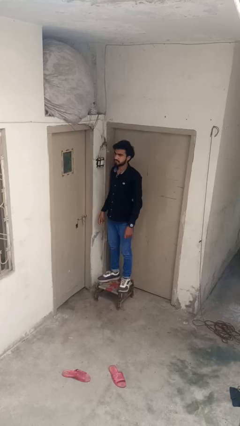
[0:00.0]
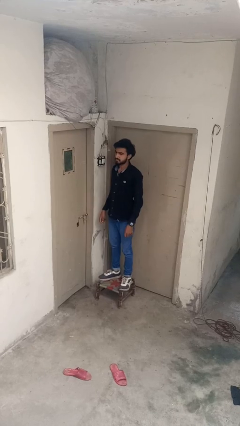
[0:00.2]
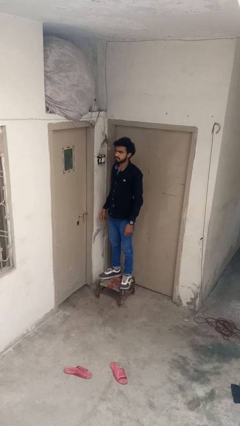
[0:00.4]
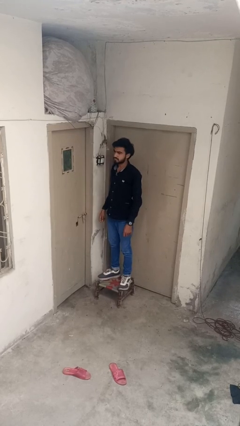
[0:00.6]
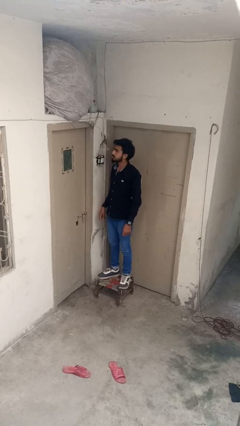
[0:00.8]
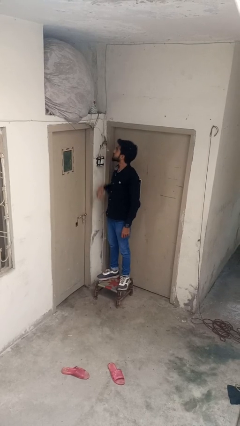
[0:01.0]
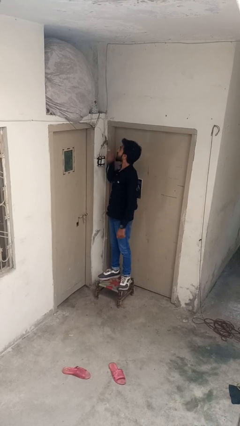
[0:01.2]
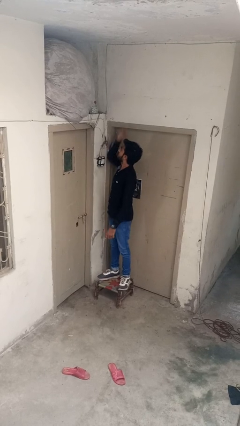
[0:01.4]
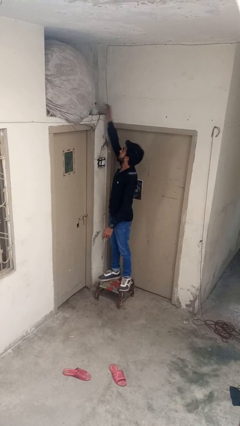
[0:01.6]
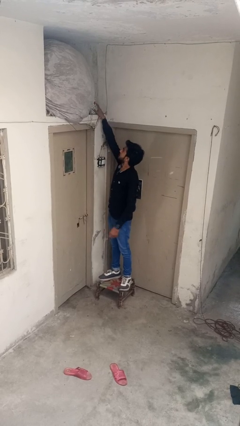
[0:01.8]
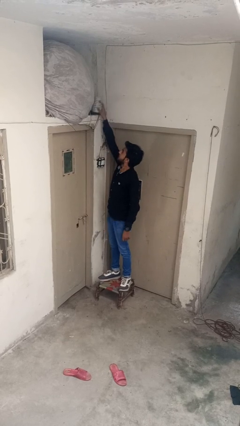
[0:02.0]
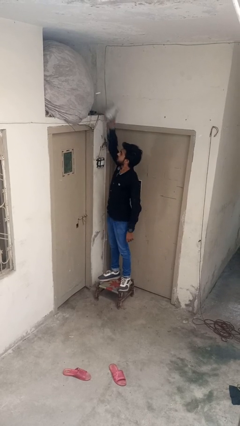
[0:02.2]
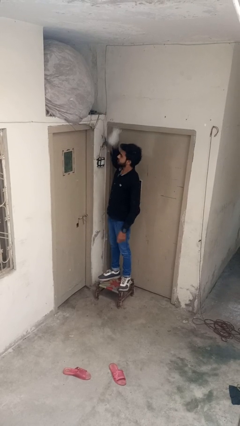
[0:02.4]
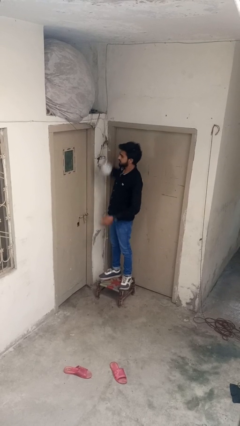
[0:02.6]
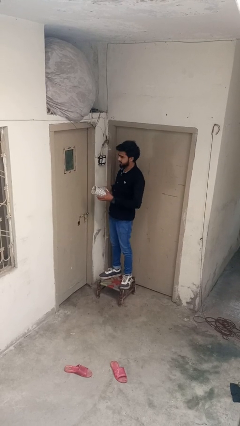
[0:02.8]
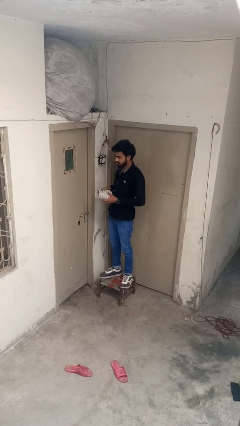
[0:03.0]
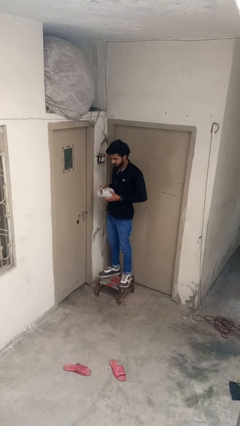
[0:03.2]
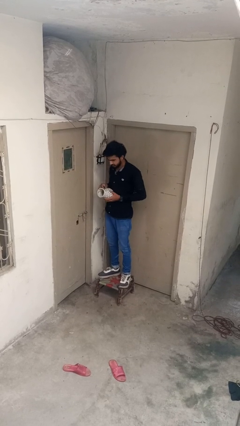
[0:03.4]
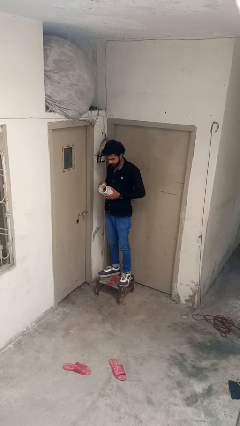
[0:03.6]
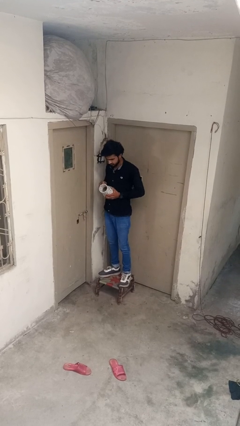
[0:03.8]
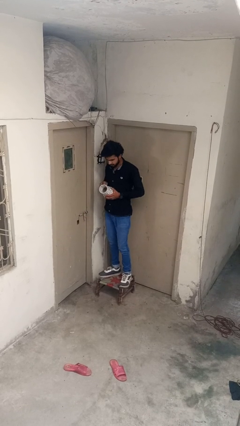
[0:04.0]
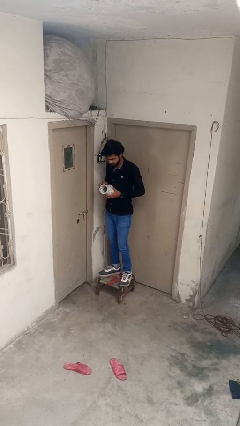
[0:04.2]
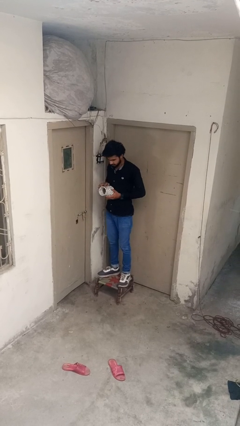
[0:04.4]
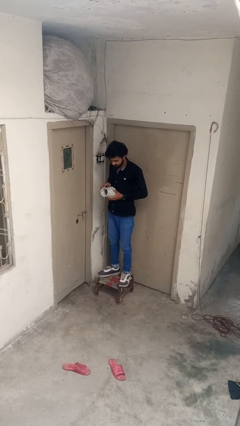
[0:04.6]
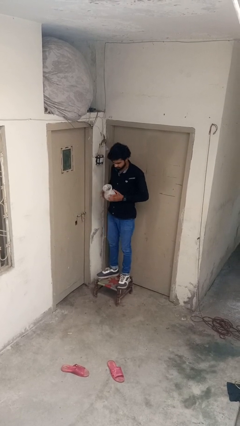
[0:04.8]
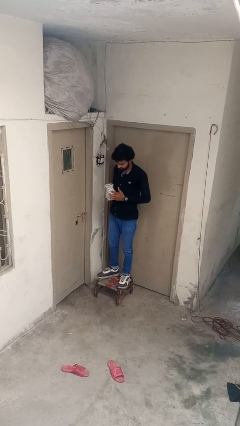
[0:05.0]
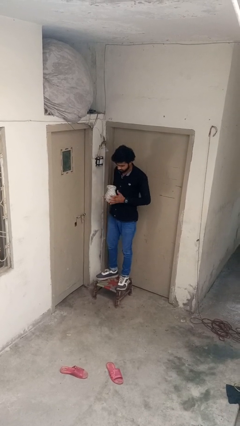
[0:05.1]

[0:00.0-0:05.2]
person picks up object from shelf

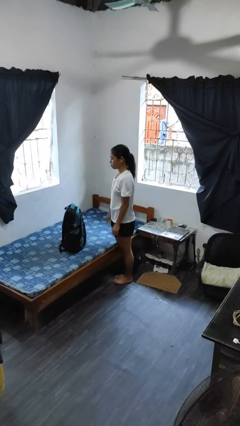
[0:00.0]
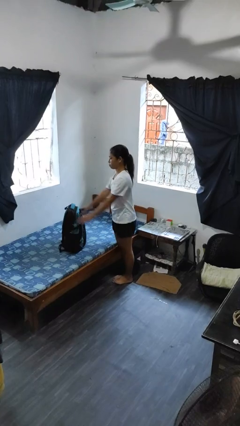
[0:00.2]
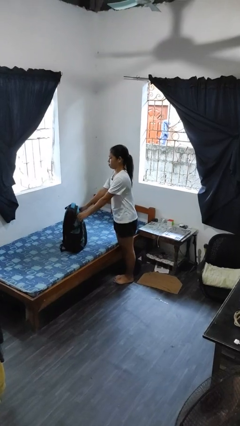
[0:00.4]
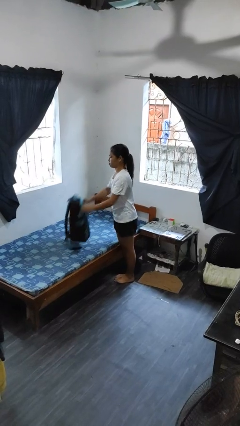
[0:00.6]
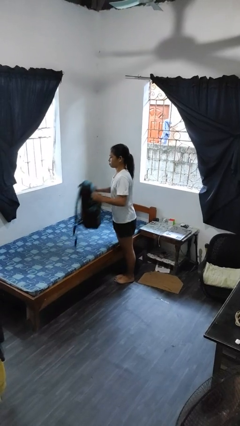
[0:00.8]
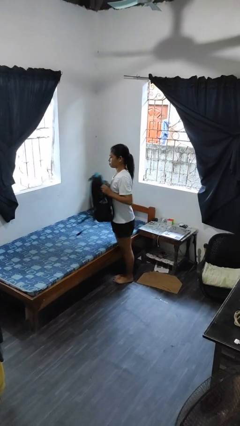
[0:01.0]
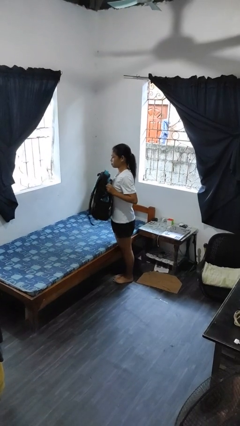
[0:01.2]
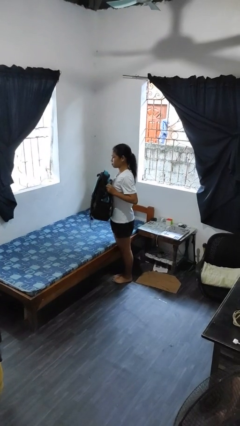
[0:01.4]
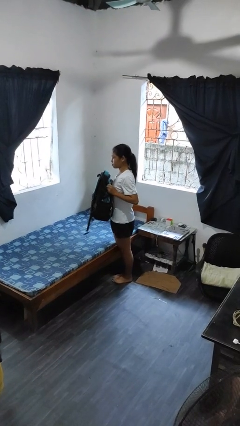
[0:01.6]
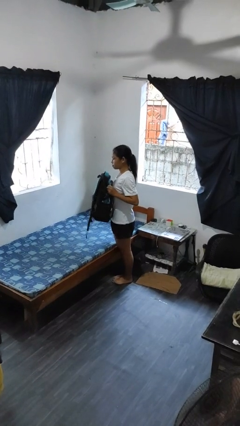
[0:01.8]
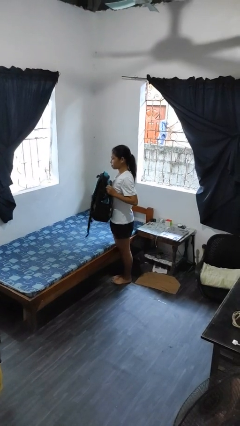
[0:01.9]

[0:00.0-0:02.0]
person picks up object from bed

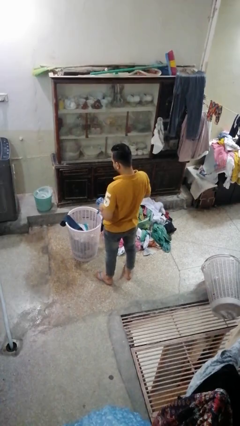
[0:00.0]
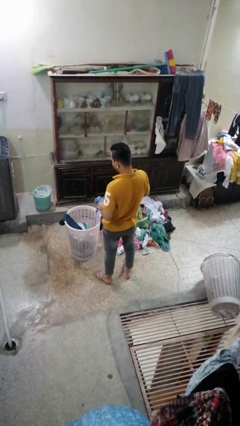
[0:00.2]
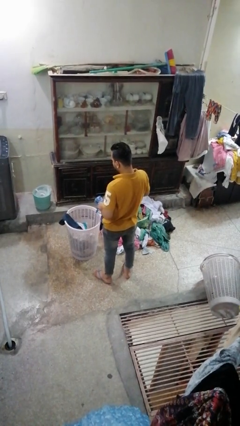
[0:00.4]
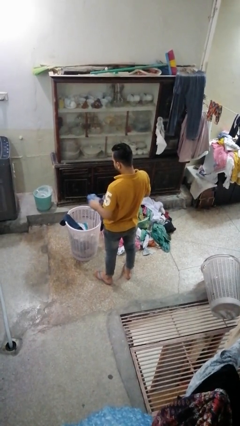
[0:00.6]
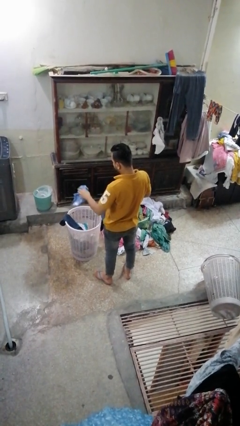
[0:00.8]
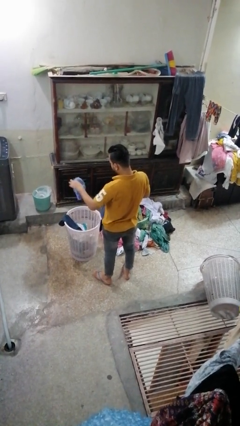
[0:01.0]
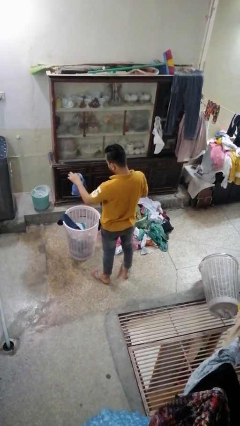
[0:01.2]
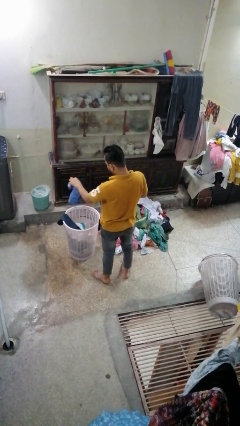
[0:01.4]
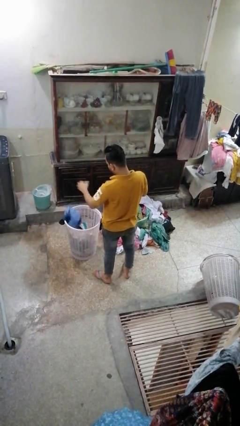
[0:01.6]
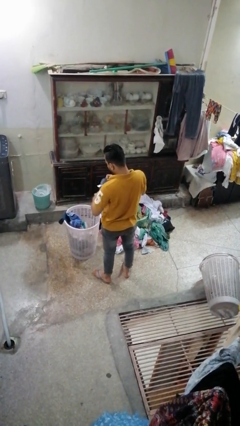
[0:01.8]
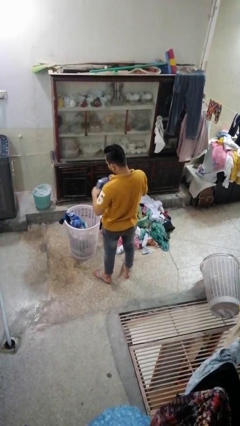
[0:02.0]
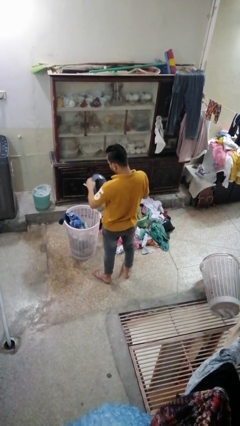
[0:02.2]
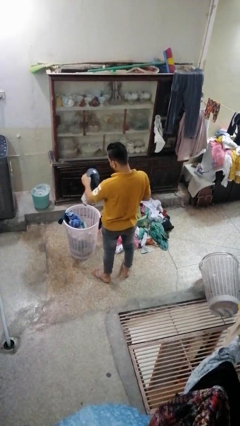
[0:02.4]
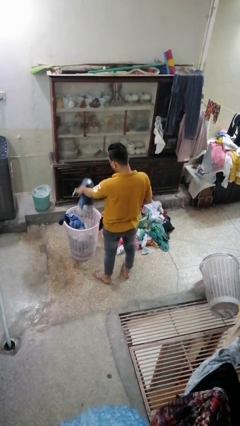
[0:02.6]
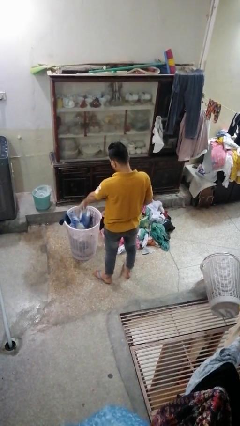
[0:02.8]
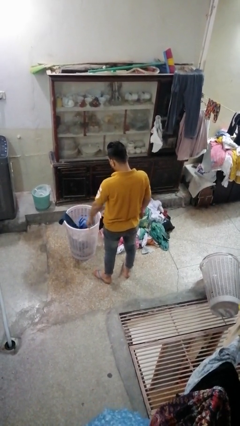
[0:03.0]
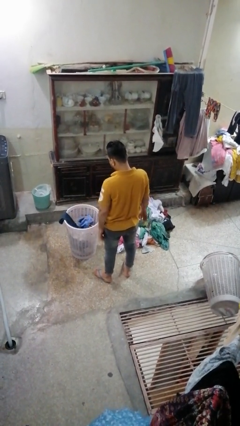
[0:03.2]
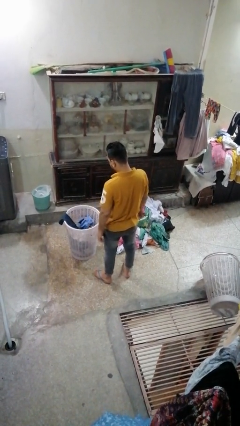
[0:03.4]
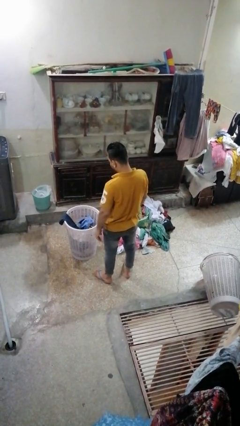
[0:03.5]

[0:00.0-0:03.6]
person puts object into basket

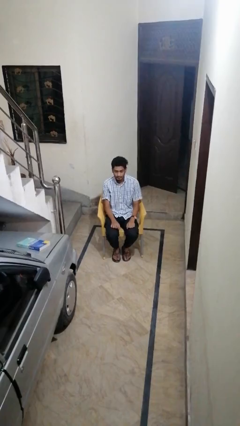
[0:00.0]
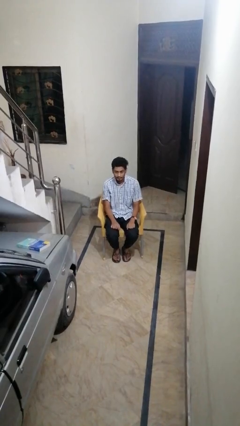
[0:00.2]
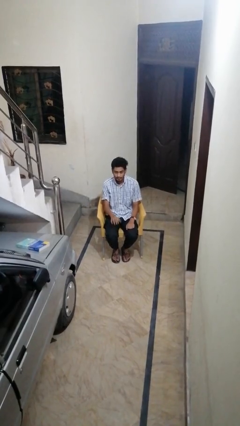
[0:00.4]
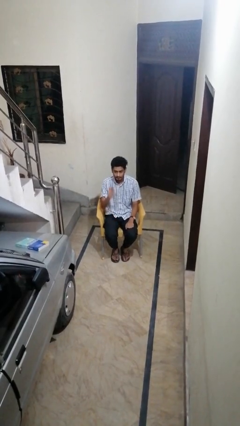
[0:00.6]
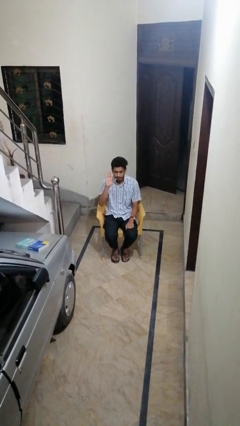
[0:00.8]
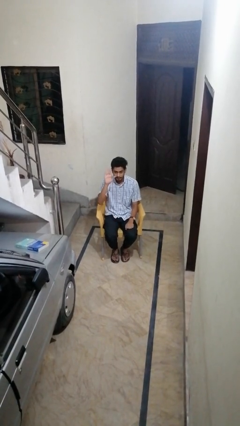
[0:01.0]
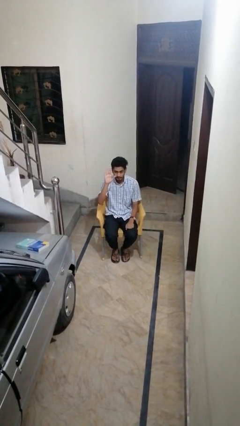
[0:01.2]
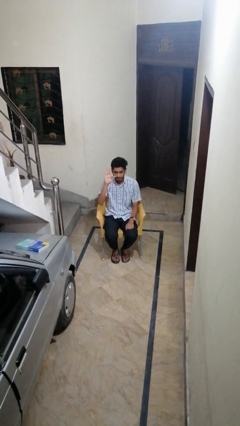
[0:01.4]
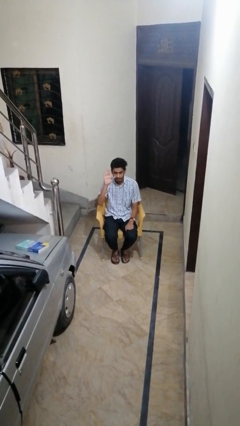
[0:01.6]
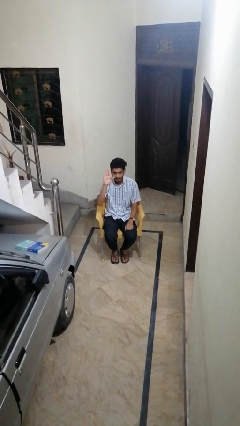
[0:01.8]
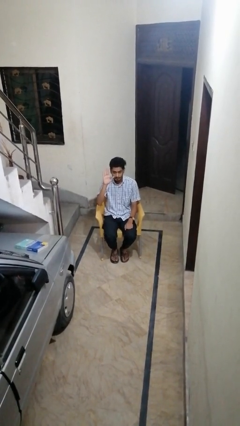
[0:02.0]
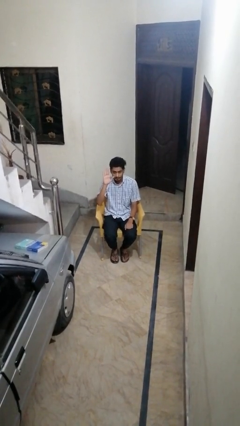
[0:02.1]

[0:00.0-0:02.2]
person gestures raise hand

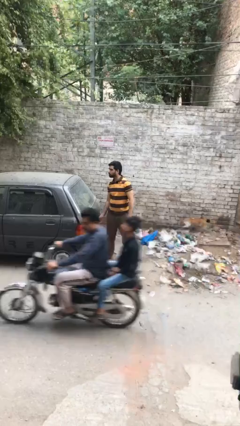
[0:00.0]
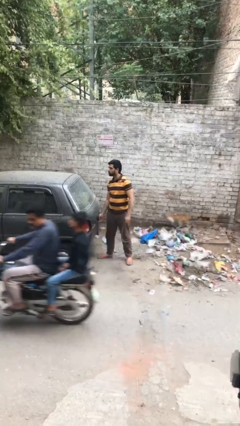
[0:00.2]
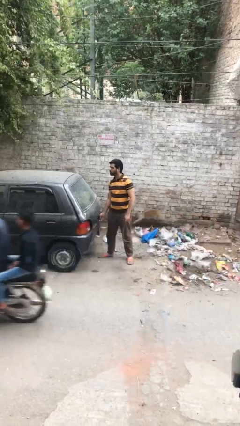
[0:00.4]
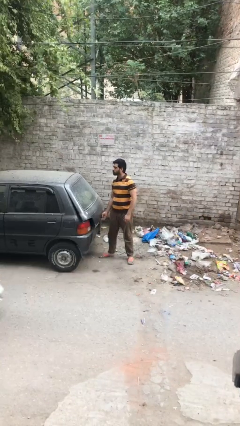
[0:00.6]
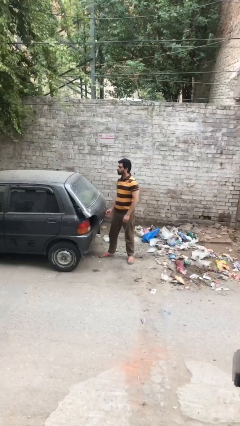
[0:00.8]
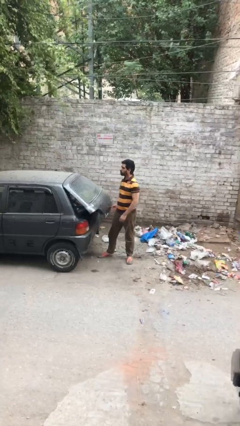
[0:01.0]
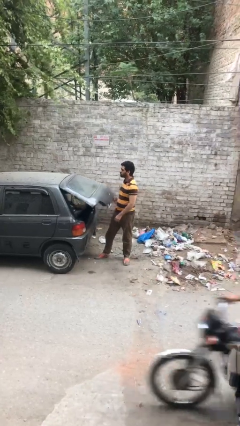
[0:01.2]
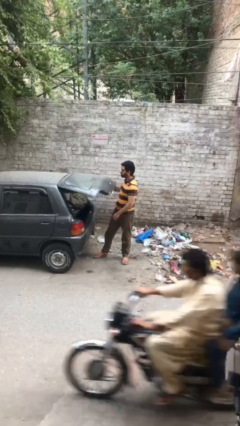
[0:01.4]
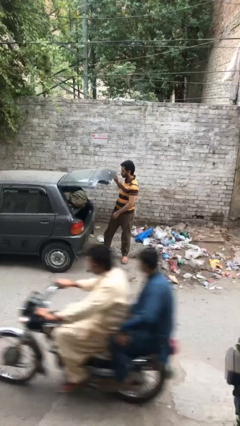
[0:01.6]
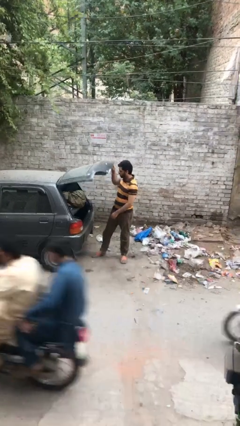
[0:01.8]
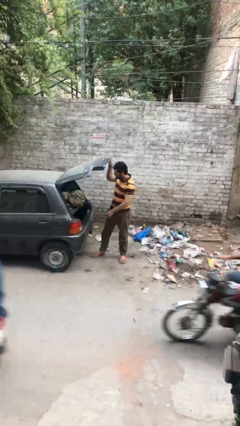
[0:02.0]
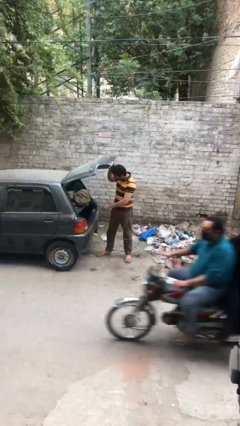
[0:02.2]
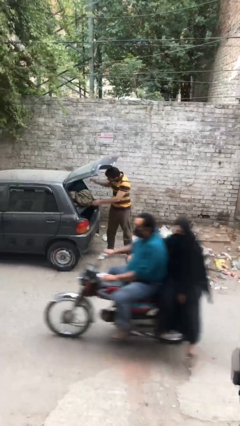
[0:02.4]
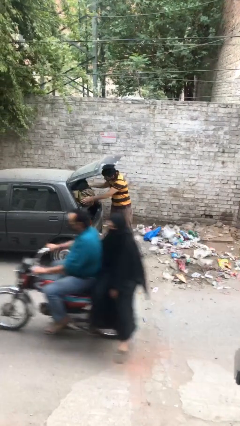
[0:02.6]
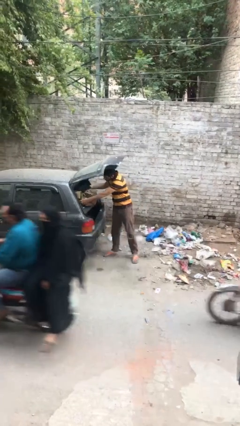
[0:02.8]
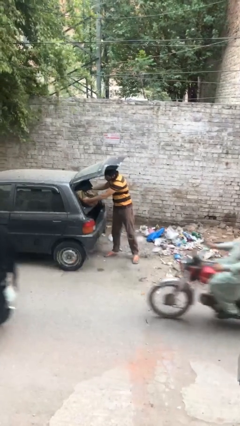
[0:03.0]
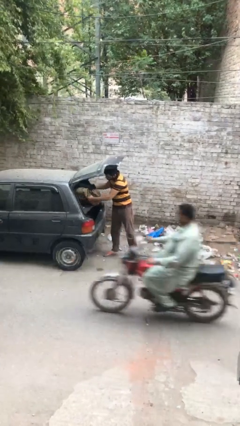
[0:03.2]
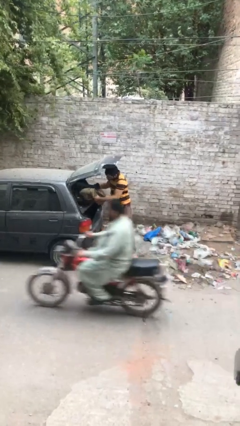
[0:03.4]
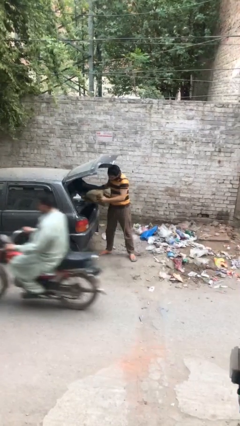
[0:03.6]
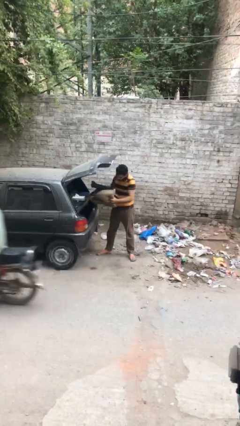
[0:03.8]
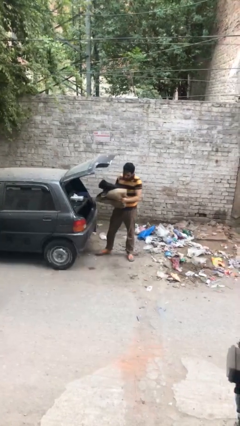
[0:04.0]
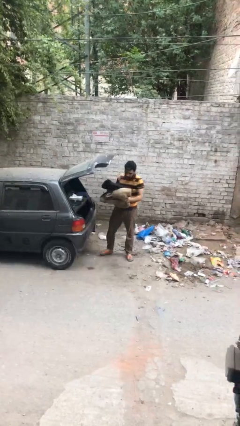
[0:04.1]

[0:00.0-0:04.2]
person unloads car
